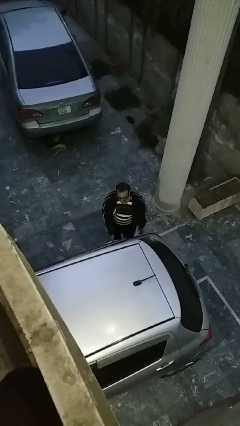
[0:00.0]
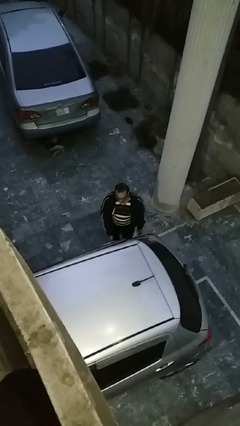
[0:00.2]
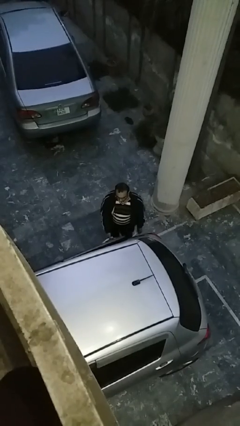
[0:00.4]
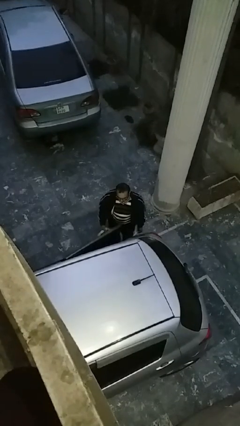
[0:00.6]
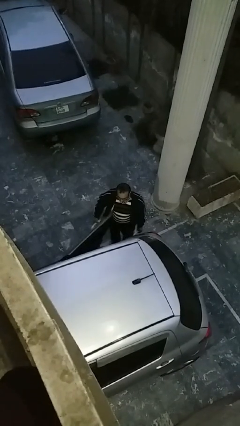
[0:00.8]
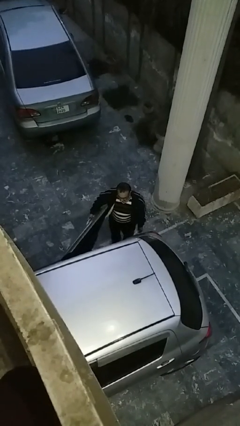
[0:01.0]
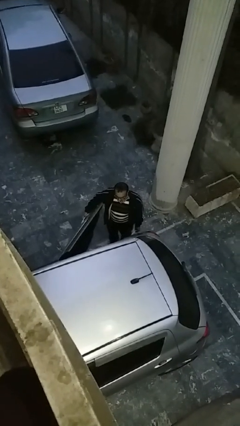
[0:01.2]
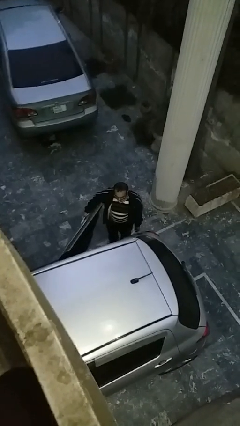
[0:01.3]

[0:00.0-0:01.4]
person opens car door

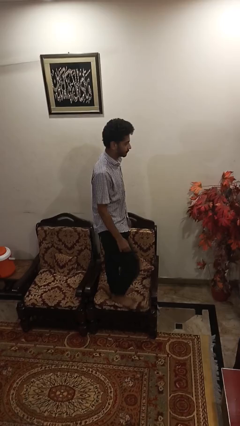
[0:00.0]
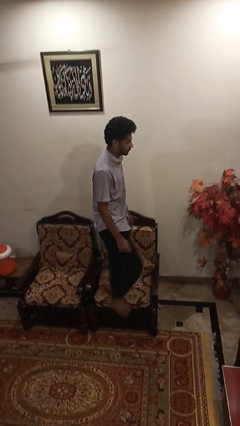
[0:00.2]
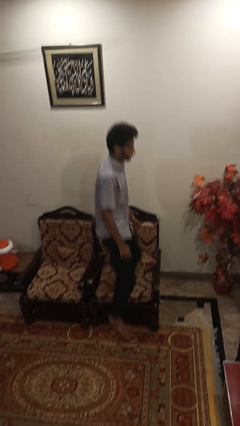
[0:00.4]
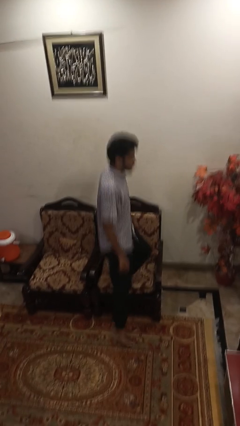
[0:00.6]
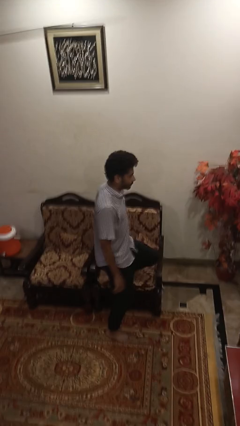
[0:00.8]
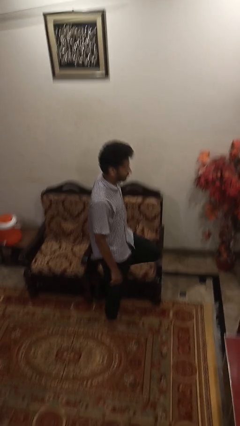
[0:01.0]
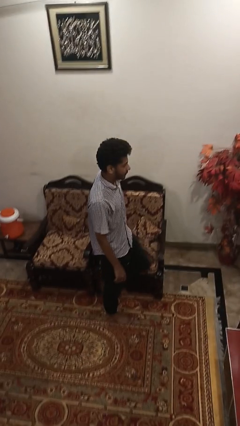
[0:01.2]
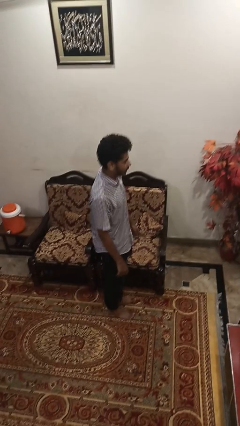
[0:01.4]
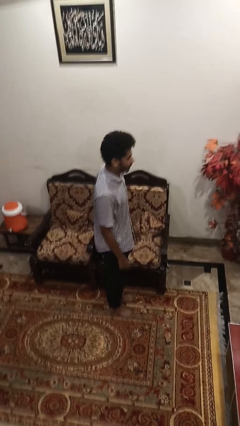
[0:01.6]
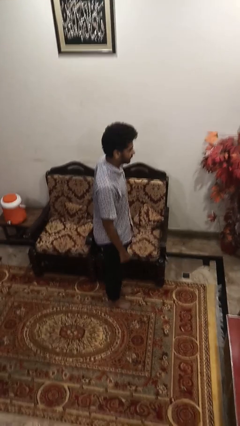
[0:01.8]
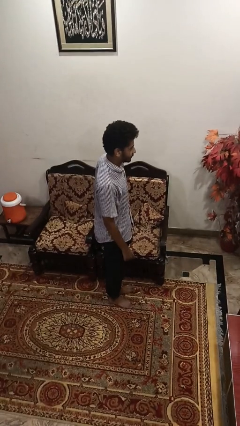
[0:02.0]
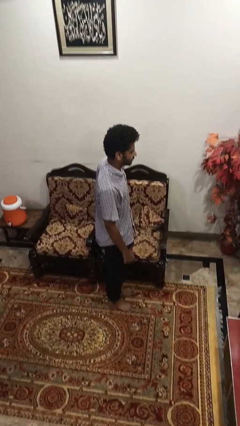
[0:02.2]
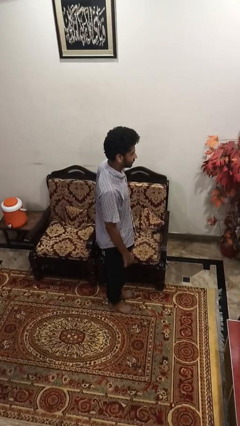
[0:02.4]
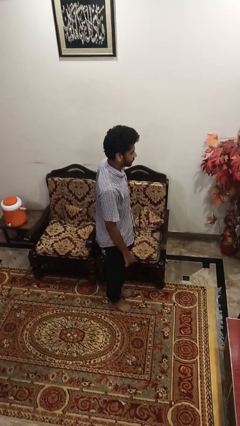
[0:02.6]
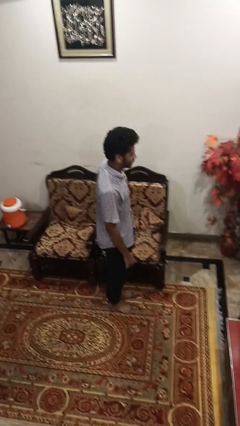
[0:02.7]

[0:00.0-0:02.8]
person climbs off couch

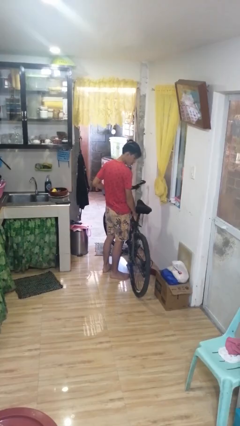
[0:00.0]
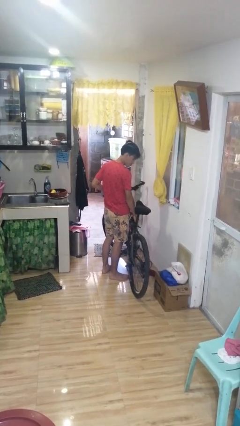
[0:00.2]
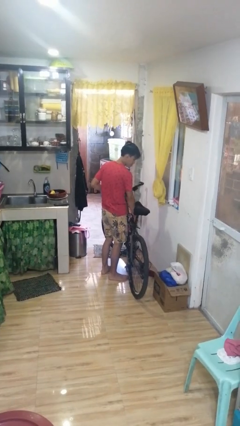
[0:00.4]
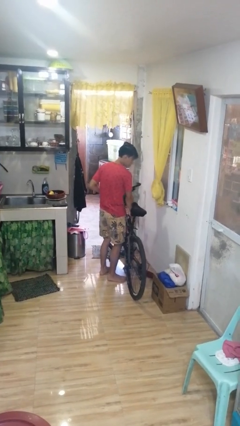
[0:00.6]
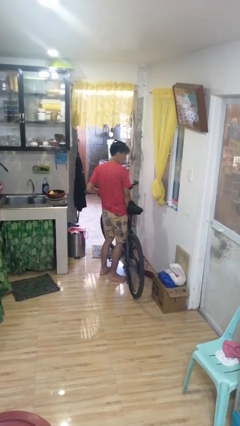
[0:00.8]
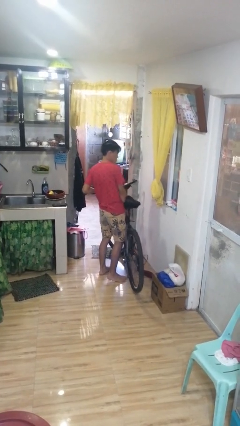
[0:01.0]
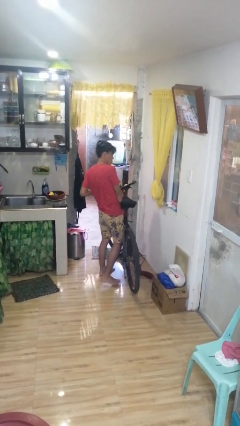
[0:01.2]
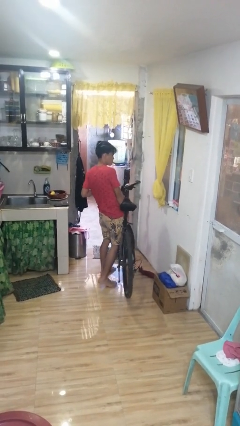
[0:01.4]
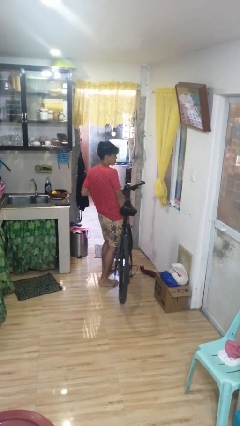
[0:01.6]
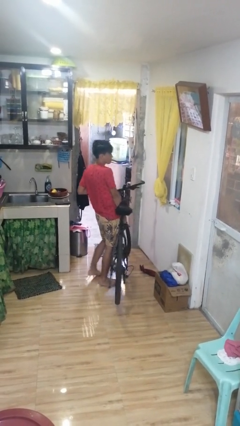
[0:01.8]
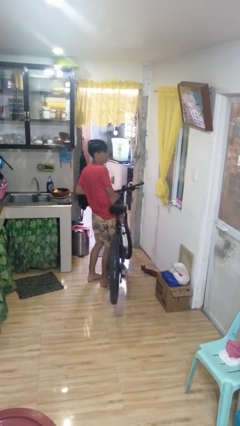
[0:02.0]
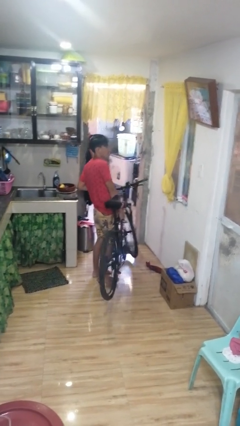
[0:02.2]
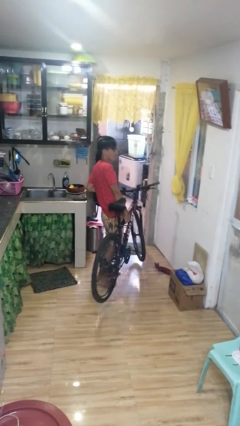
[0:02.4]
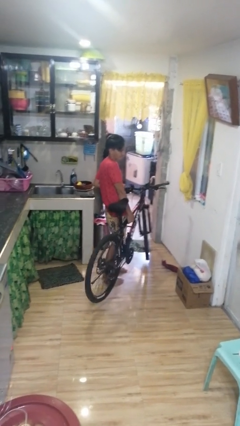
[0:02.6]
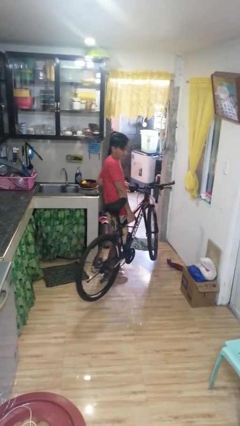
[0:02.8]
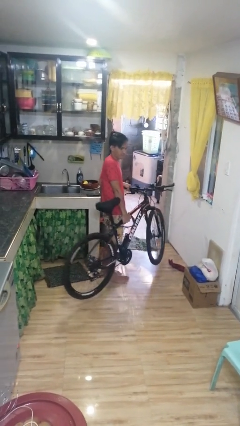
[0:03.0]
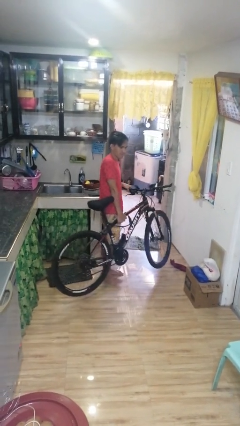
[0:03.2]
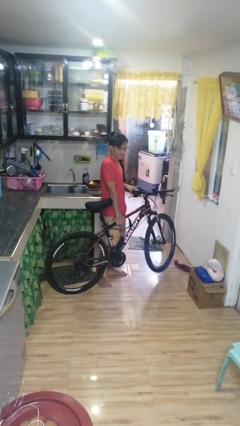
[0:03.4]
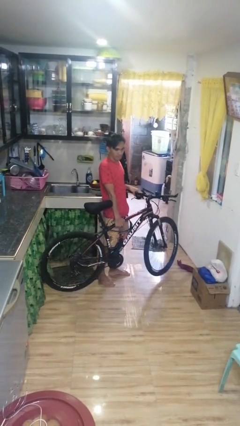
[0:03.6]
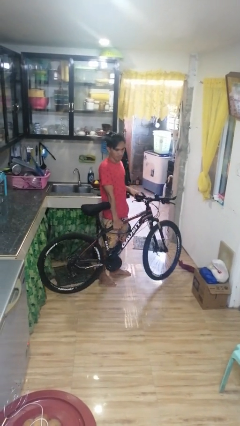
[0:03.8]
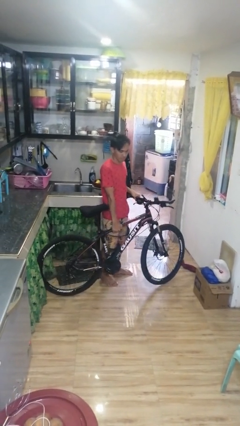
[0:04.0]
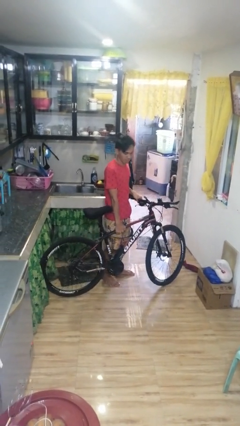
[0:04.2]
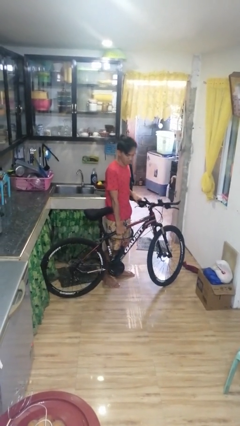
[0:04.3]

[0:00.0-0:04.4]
person carries bicycle

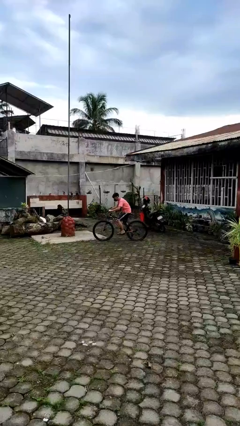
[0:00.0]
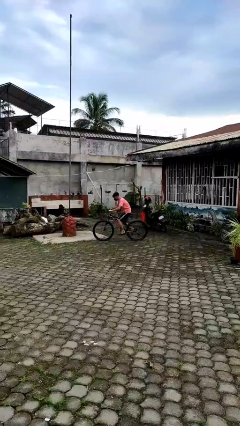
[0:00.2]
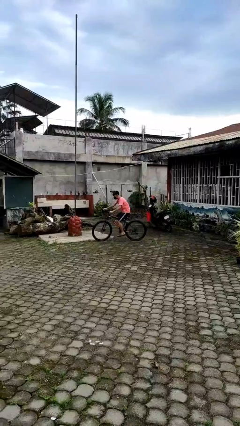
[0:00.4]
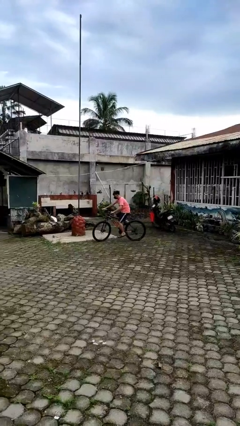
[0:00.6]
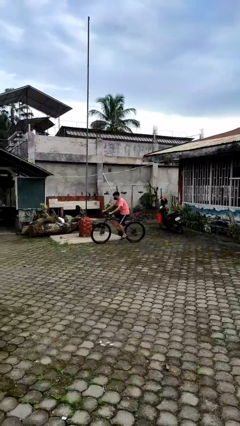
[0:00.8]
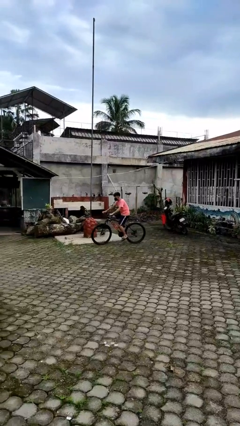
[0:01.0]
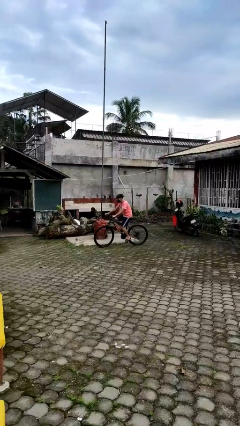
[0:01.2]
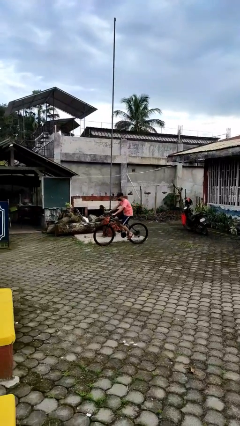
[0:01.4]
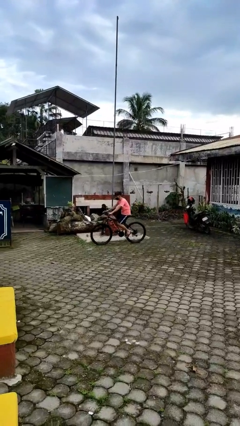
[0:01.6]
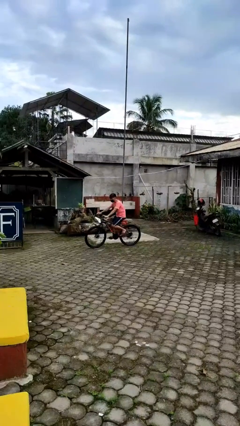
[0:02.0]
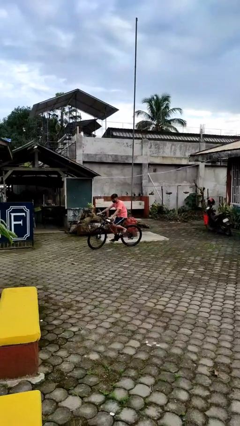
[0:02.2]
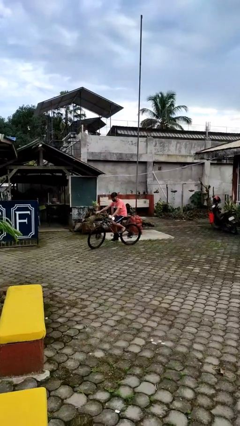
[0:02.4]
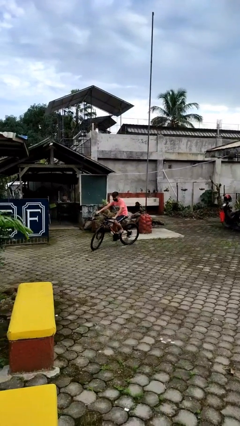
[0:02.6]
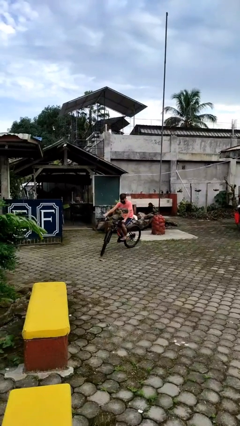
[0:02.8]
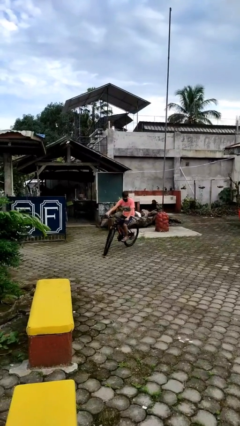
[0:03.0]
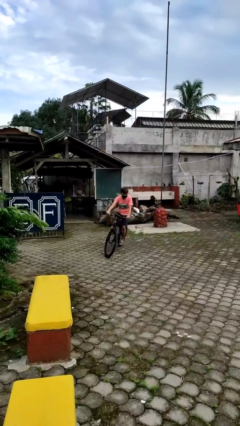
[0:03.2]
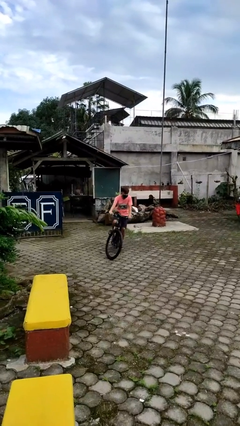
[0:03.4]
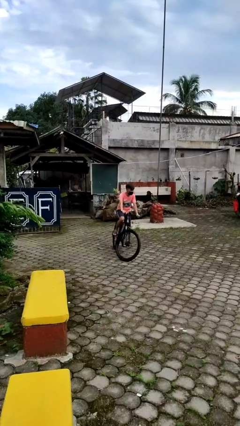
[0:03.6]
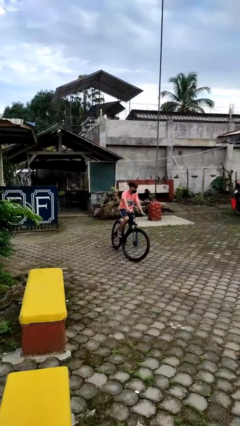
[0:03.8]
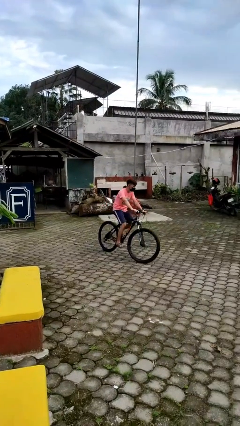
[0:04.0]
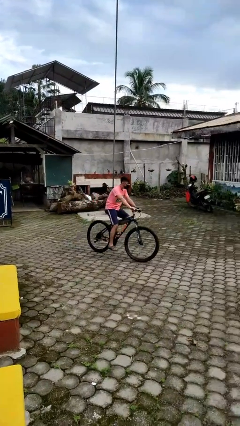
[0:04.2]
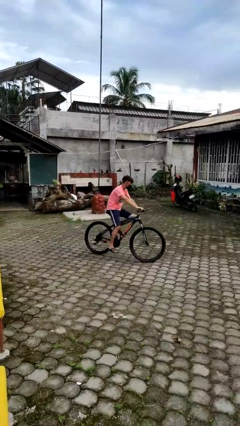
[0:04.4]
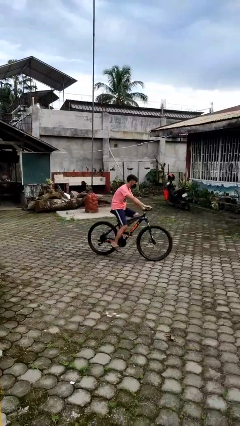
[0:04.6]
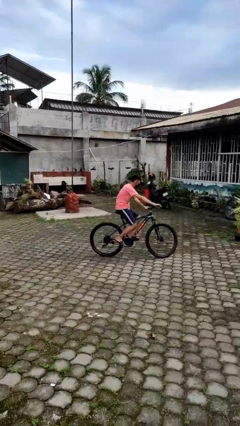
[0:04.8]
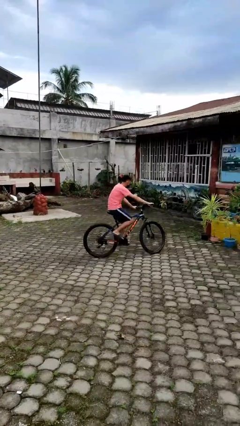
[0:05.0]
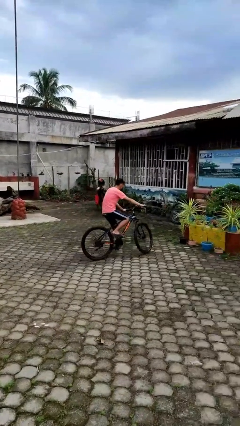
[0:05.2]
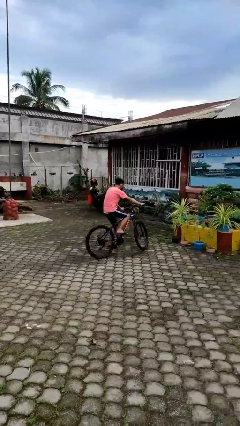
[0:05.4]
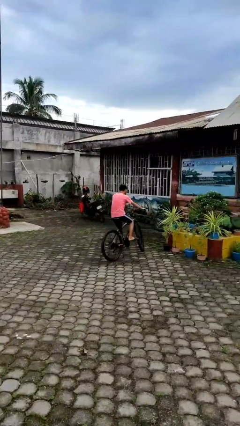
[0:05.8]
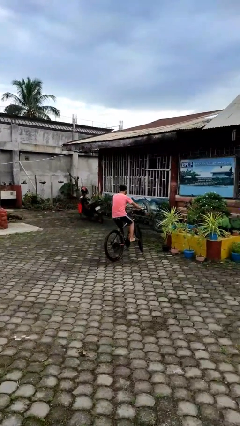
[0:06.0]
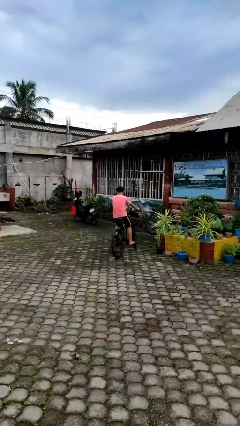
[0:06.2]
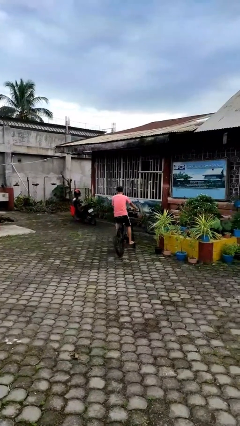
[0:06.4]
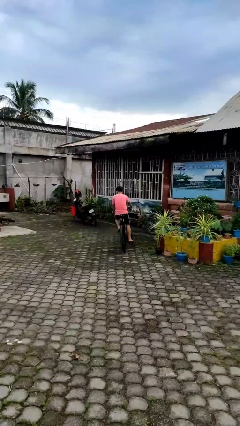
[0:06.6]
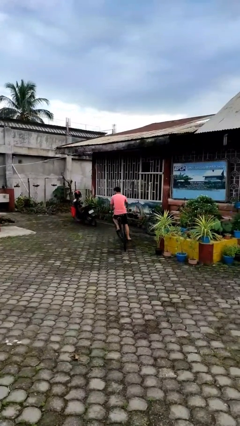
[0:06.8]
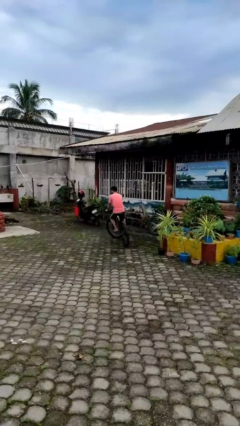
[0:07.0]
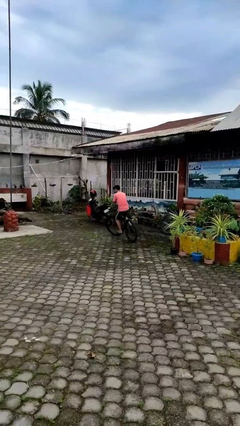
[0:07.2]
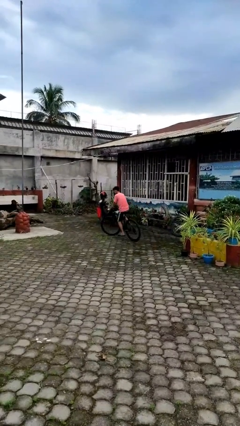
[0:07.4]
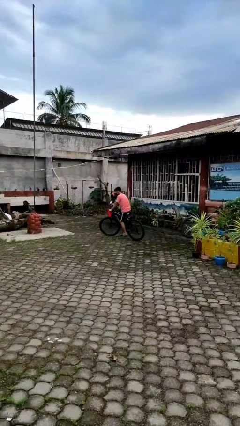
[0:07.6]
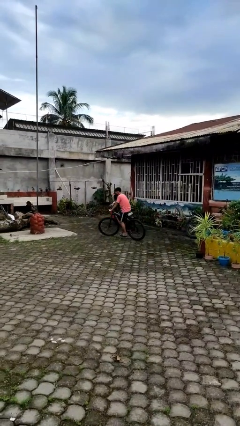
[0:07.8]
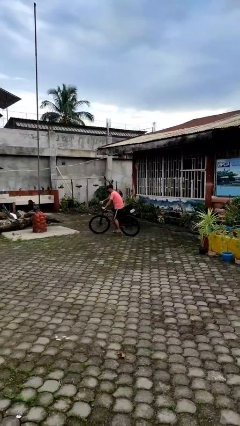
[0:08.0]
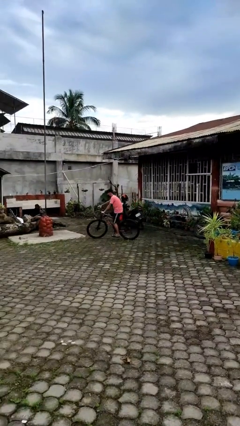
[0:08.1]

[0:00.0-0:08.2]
person rides bicycle

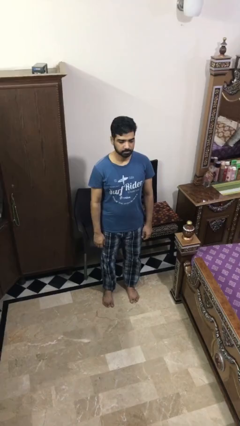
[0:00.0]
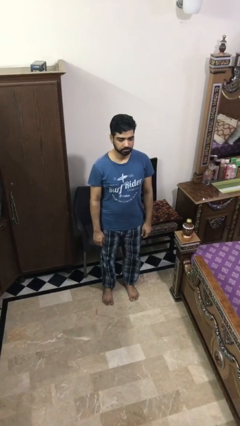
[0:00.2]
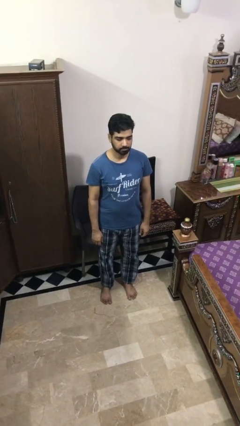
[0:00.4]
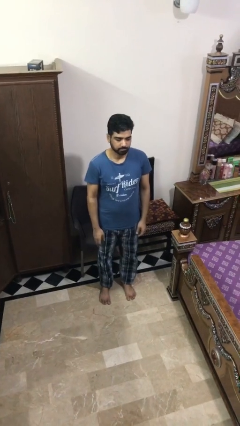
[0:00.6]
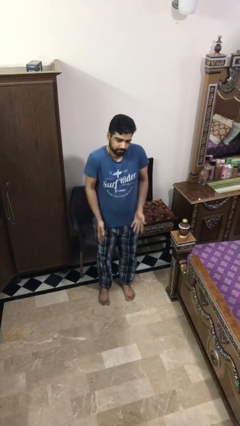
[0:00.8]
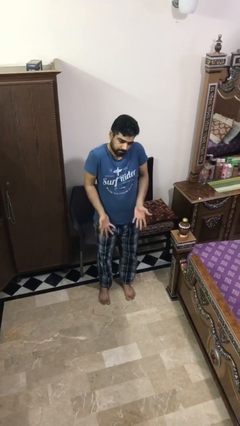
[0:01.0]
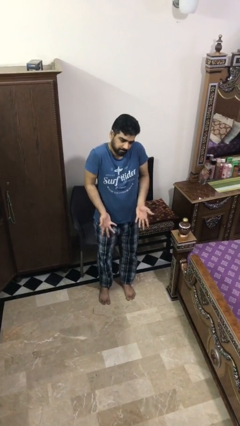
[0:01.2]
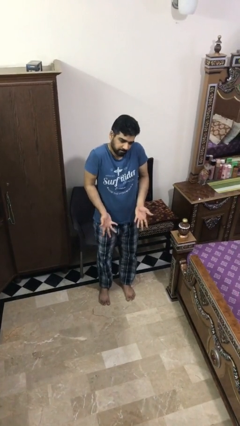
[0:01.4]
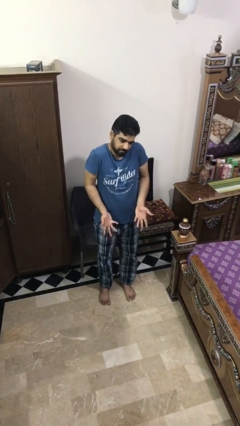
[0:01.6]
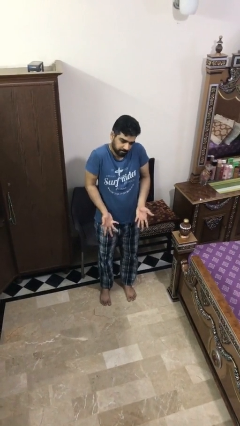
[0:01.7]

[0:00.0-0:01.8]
person shrugs
